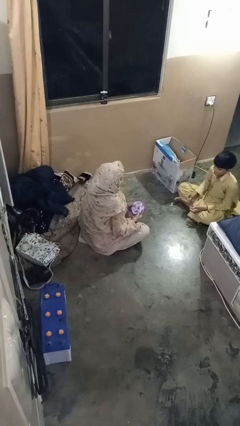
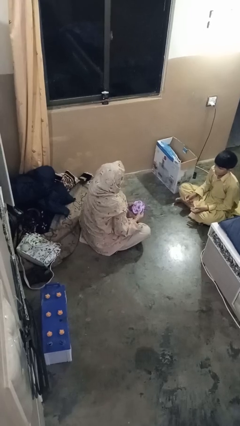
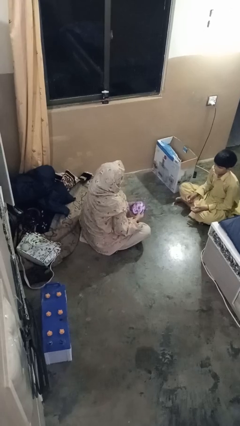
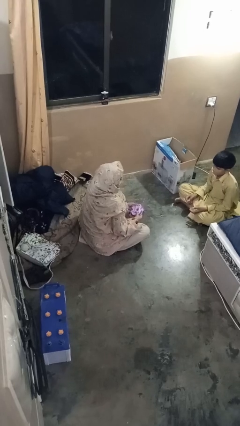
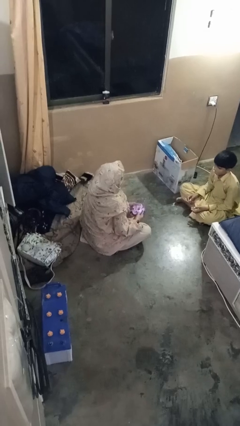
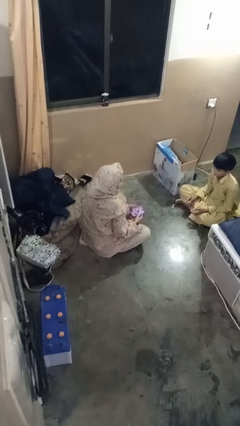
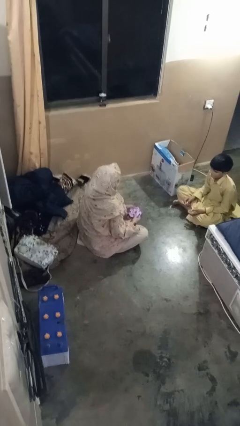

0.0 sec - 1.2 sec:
person catches object from person

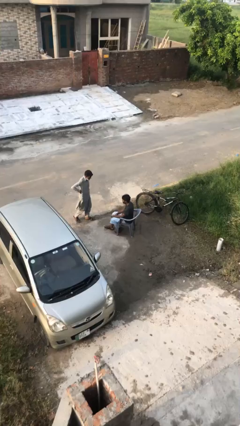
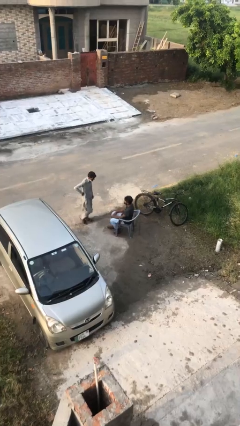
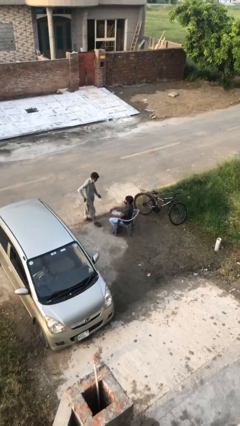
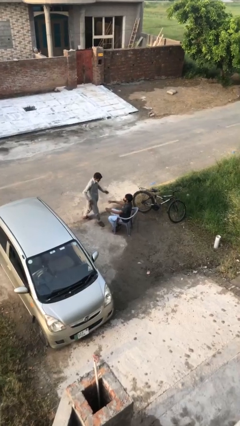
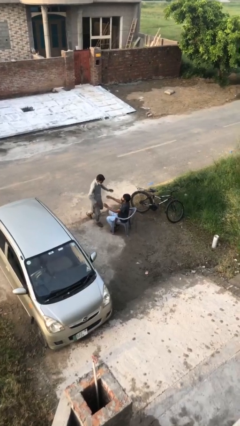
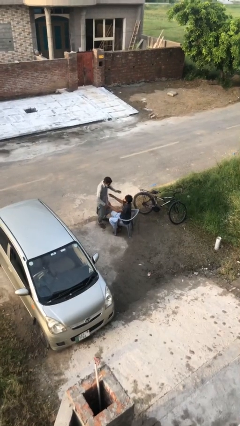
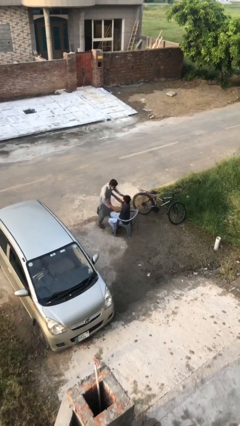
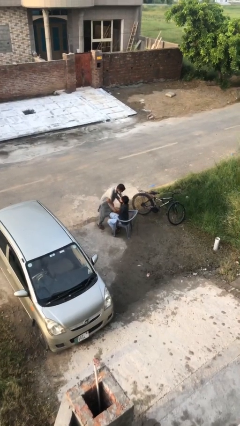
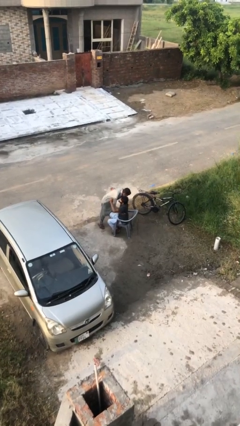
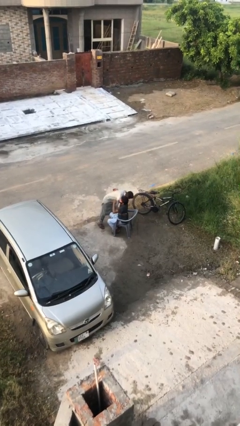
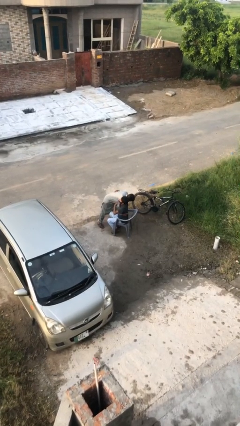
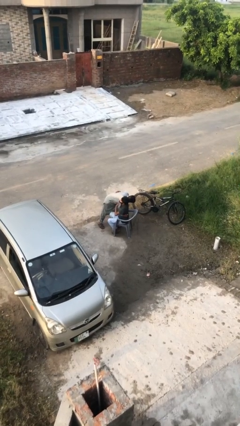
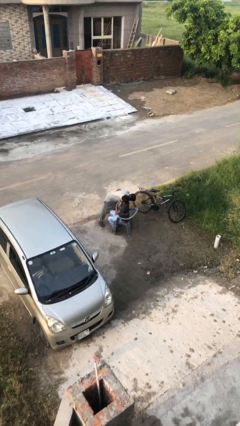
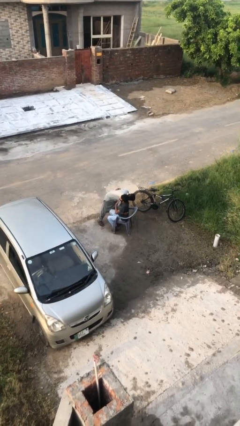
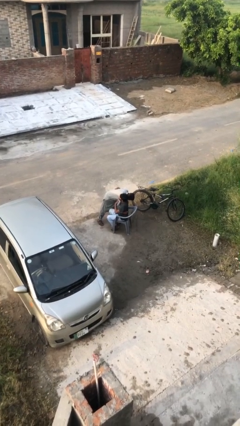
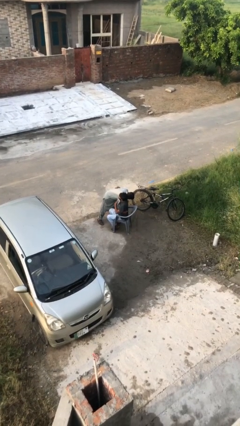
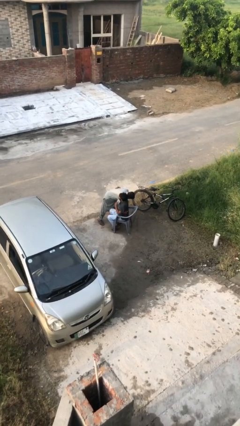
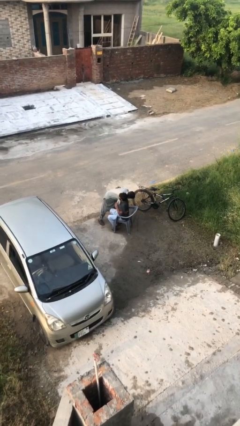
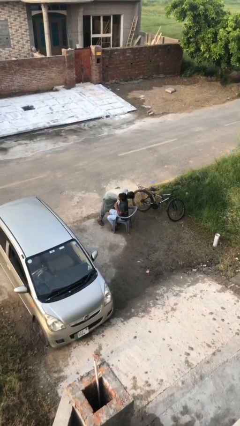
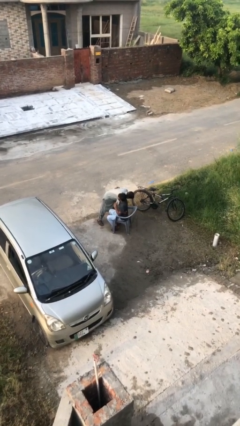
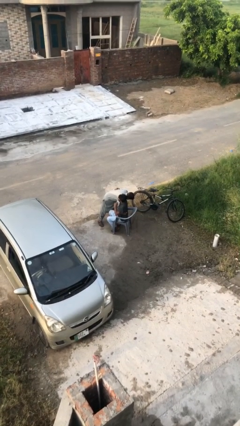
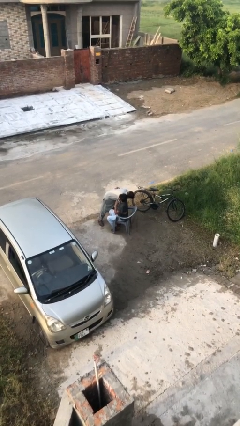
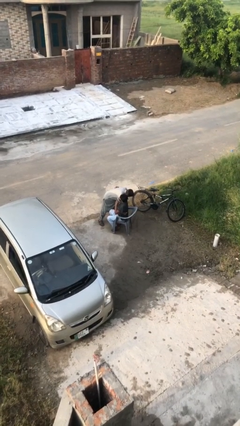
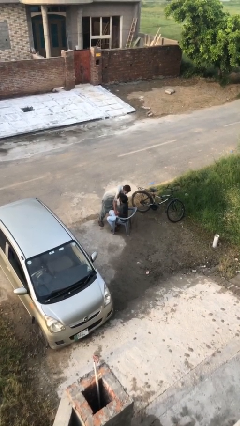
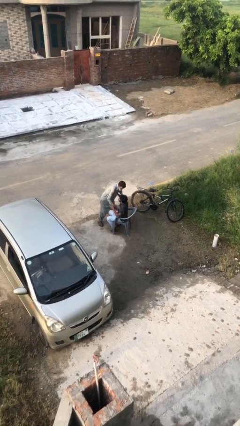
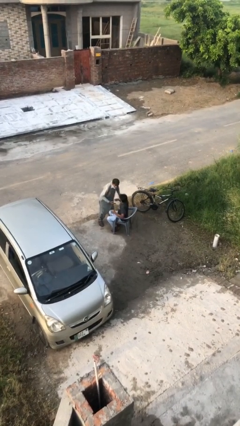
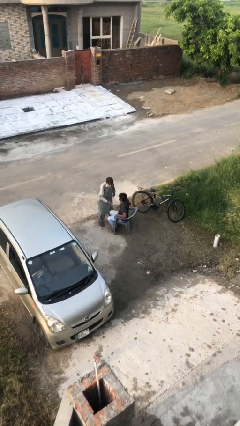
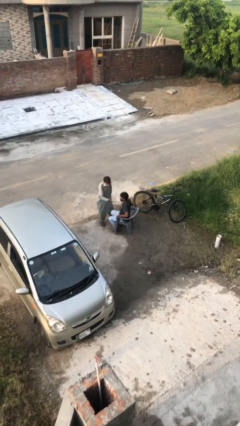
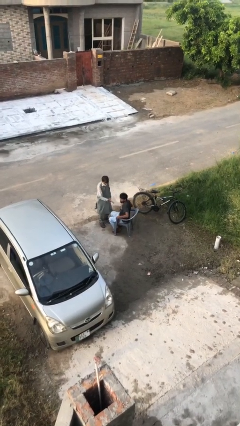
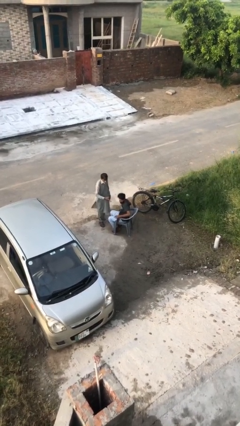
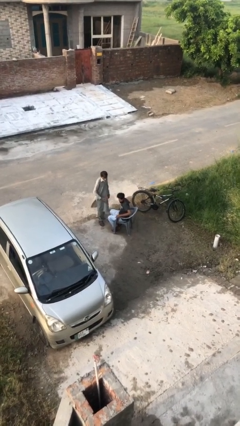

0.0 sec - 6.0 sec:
person embraces person

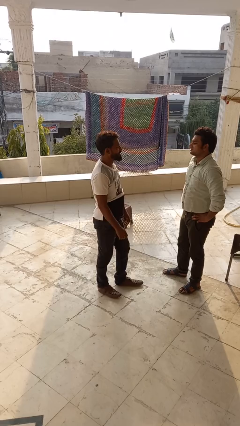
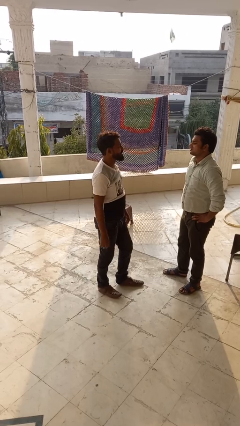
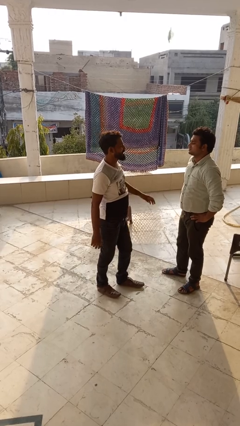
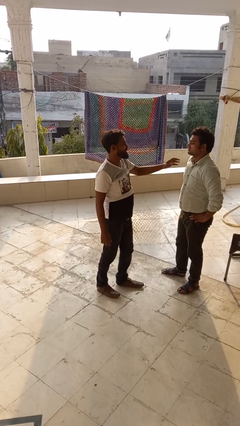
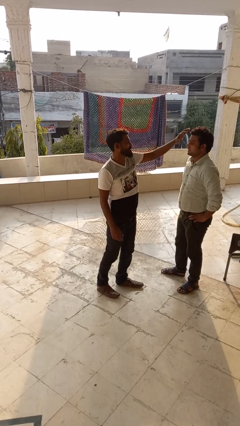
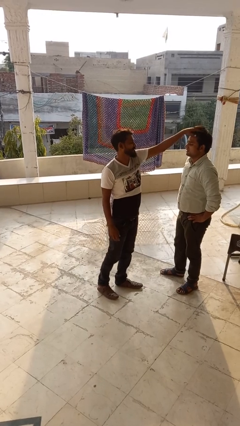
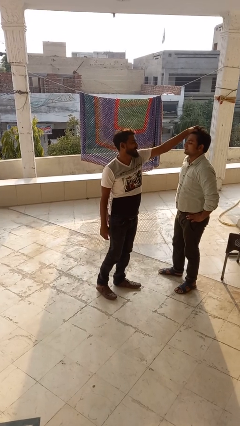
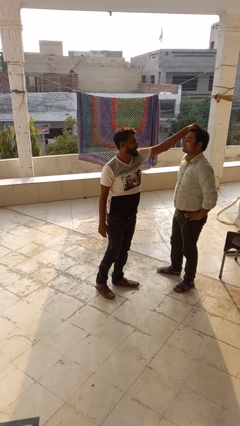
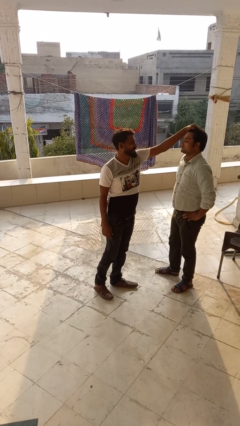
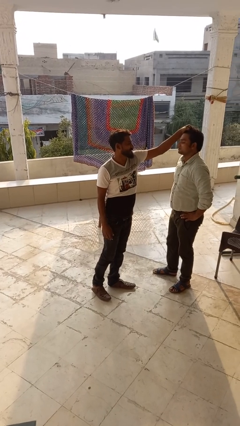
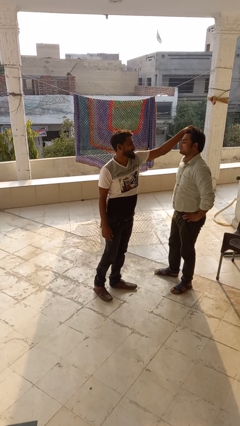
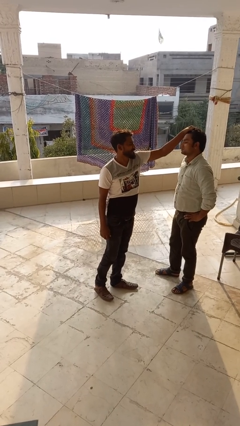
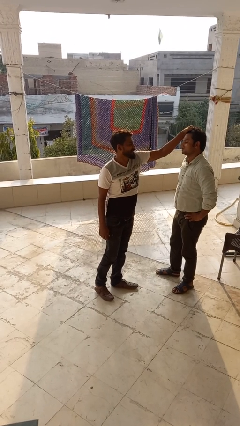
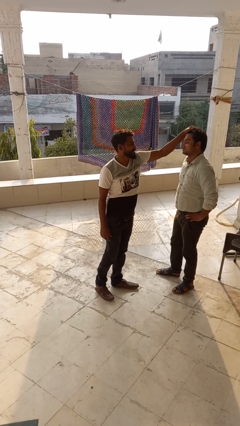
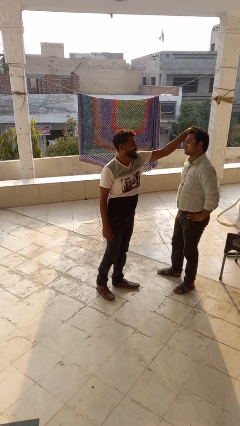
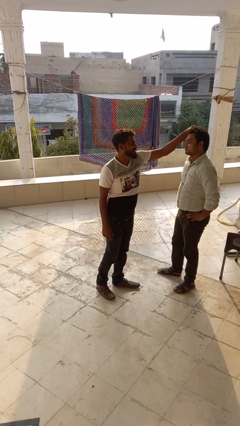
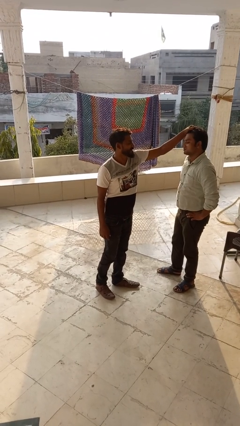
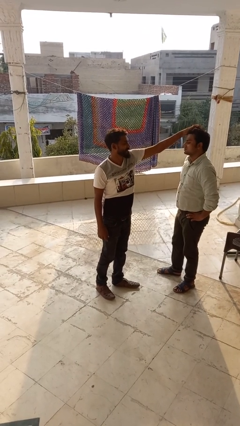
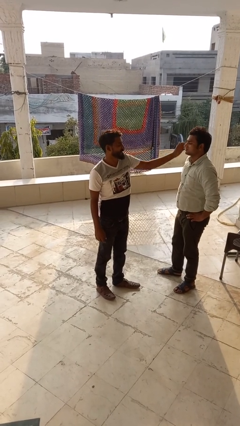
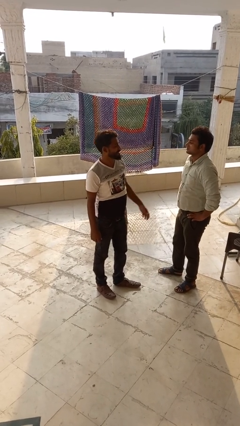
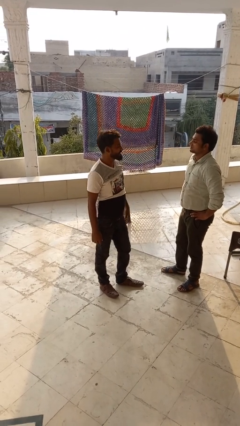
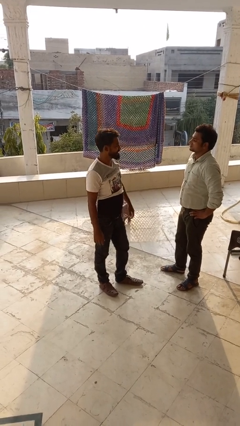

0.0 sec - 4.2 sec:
person grabs person by hair

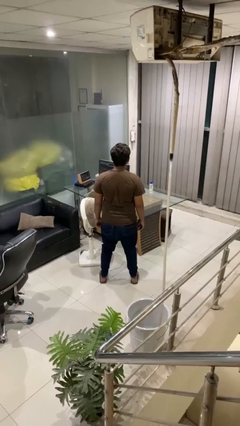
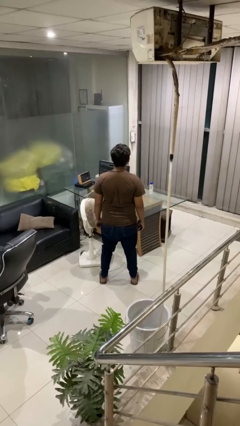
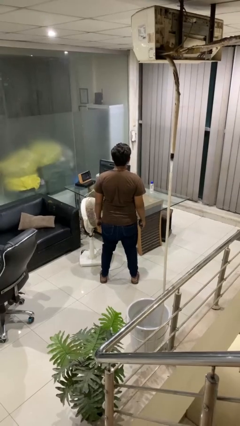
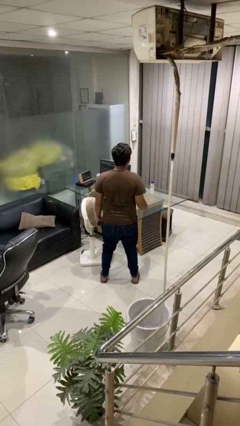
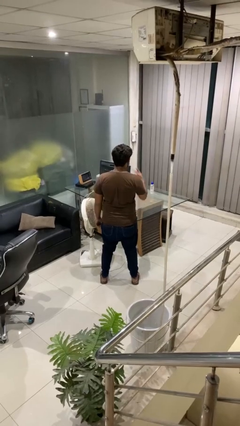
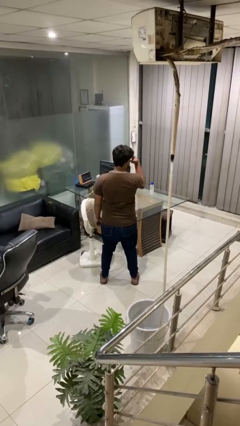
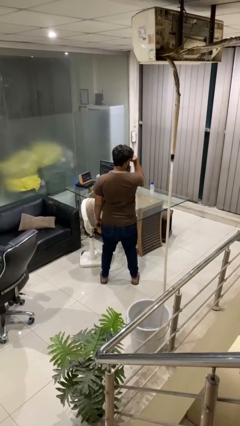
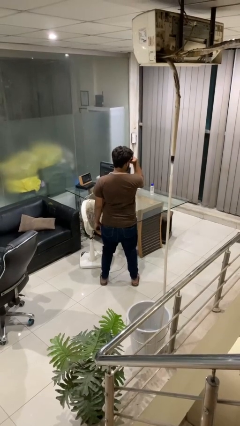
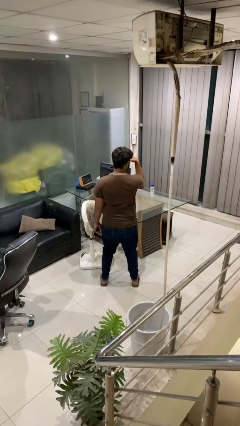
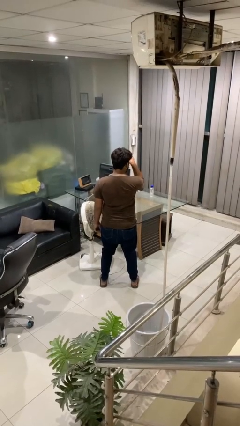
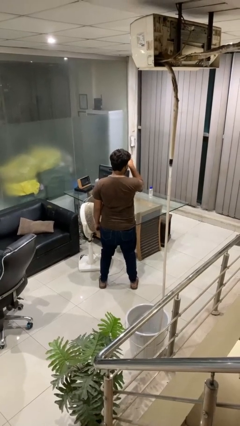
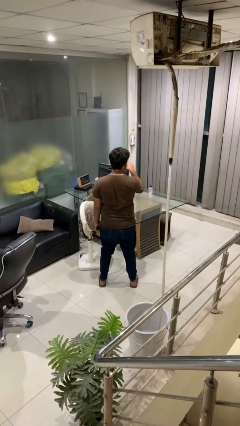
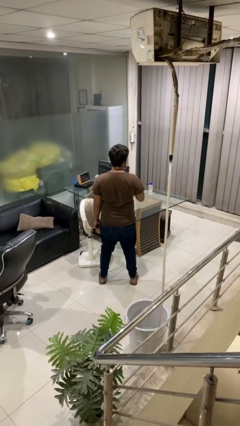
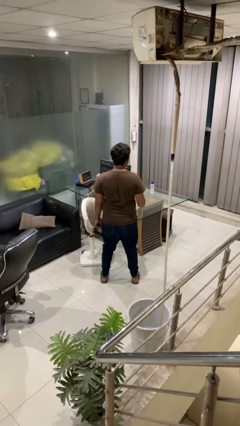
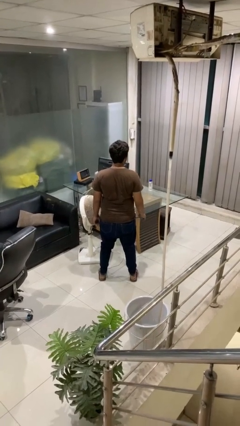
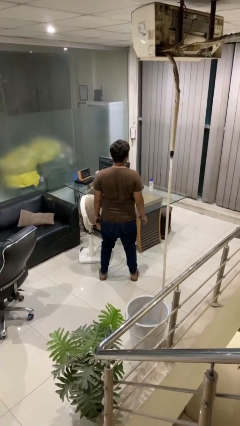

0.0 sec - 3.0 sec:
person gestures watch closely

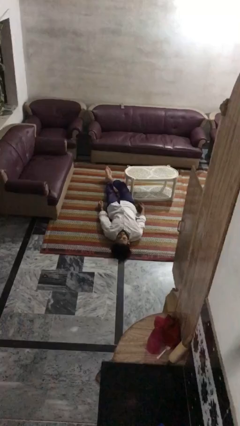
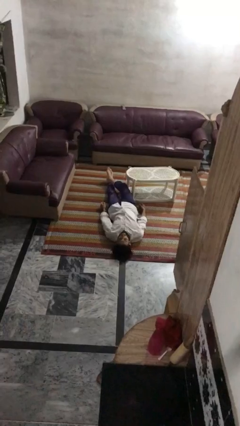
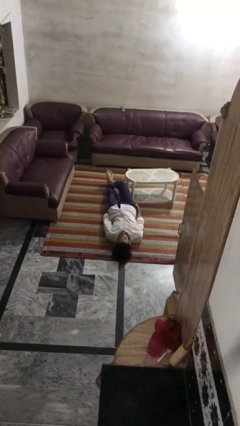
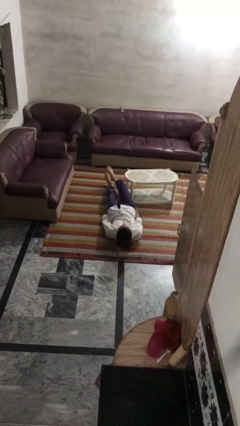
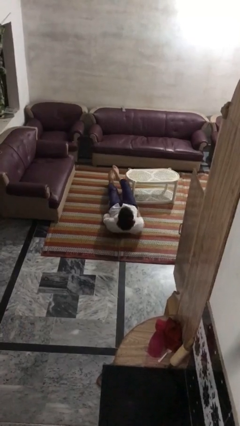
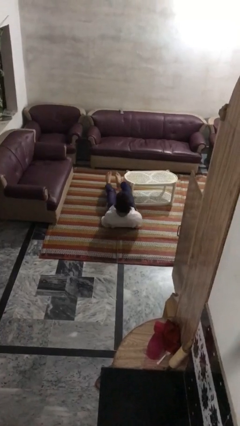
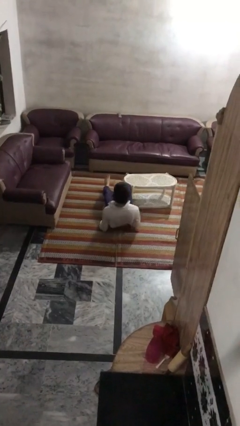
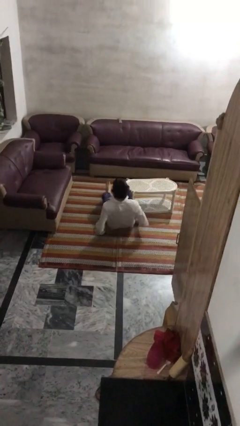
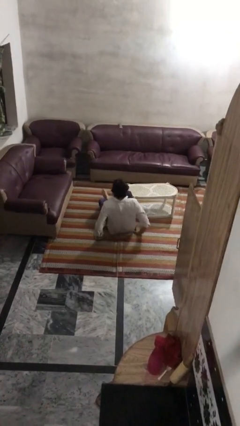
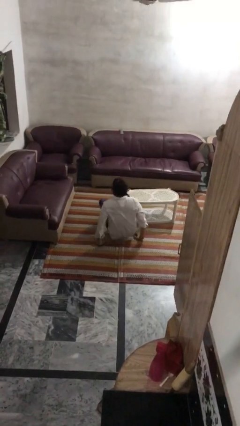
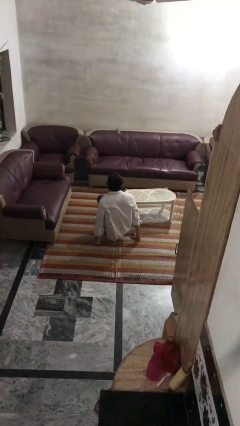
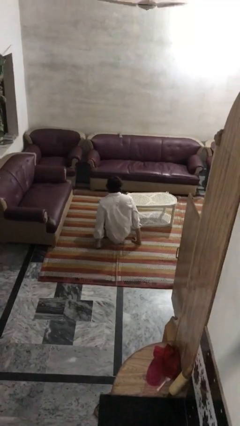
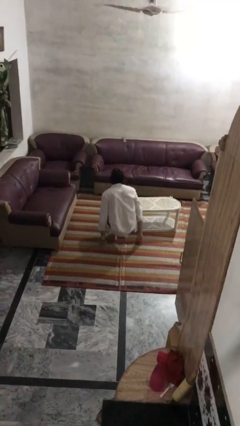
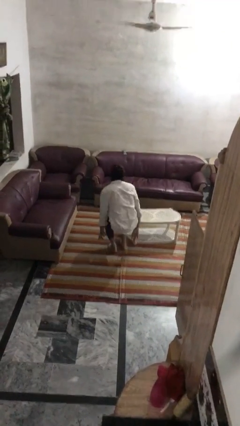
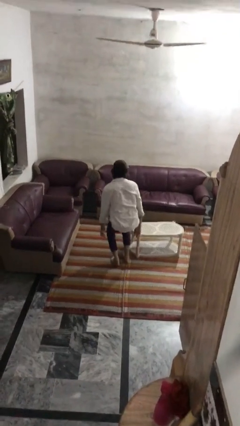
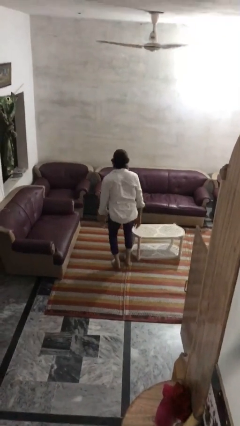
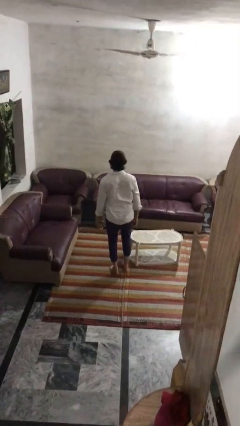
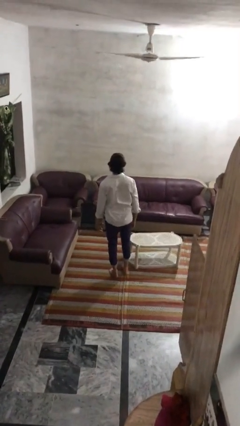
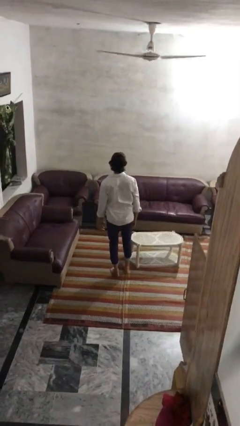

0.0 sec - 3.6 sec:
person stands up from floor
